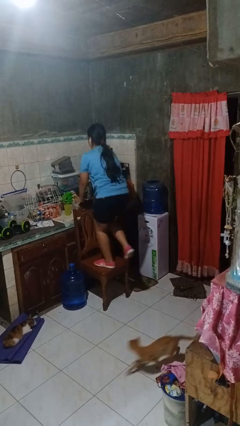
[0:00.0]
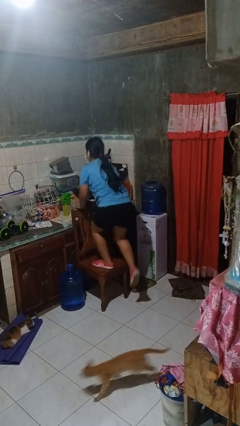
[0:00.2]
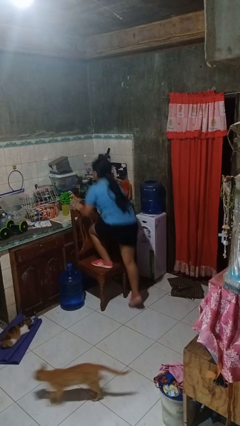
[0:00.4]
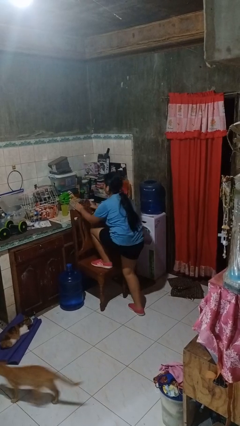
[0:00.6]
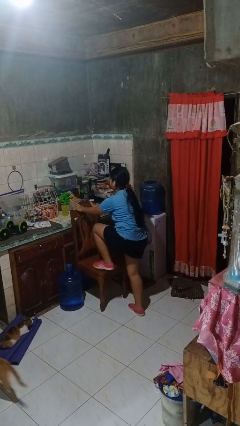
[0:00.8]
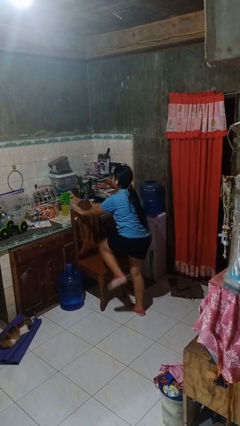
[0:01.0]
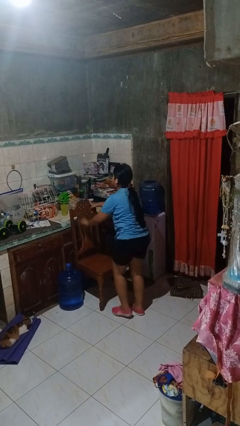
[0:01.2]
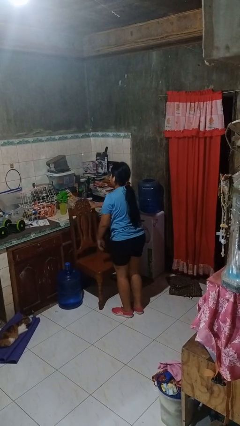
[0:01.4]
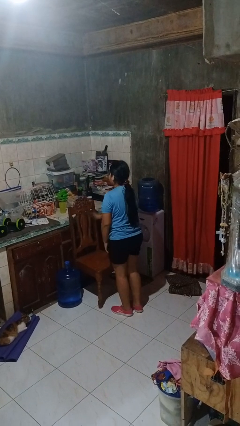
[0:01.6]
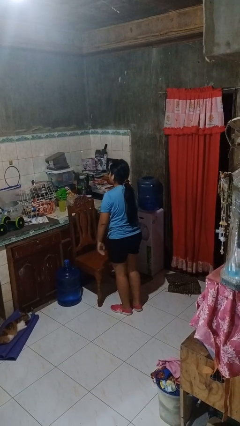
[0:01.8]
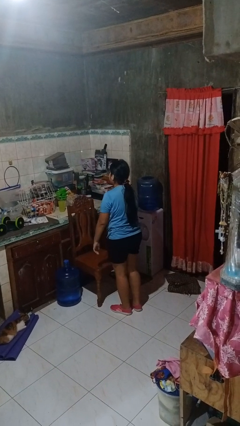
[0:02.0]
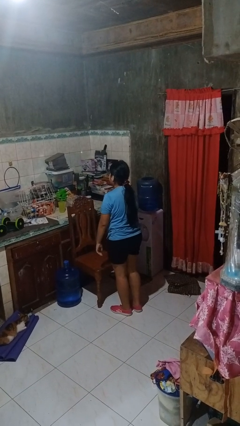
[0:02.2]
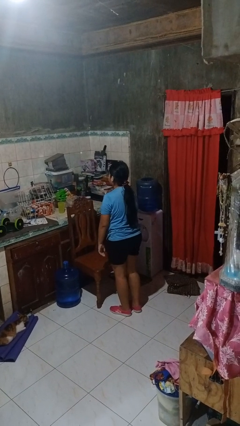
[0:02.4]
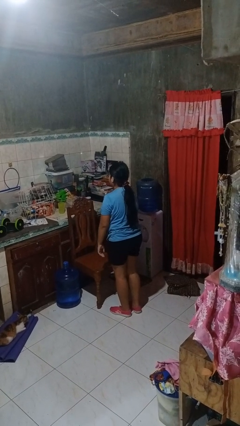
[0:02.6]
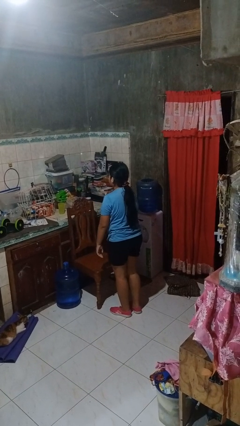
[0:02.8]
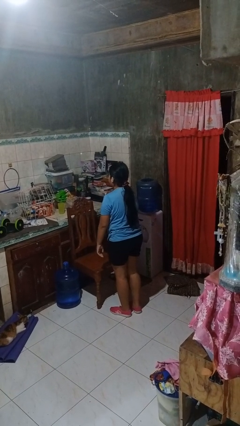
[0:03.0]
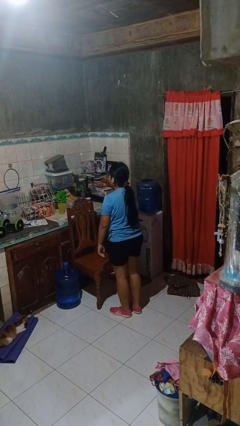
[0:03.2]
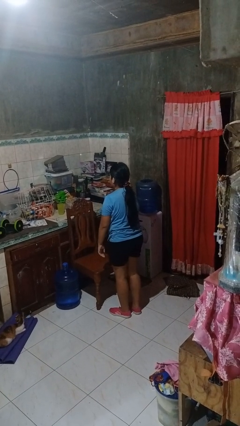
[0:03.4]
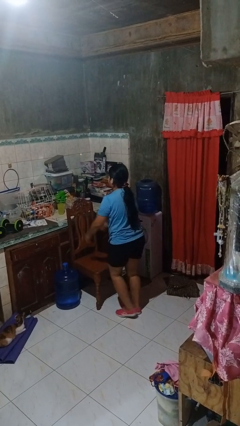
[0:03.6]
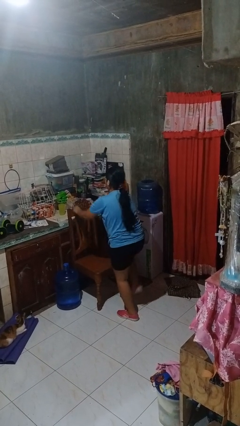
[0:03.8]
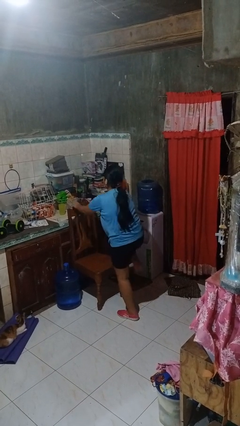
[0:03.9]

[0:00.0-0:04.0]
person climbs off chair

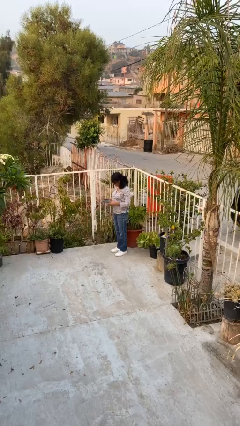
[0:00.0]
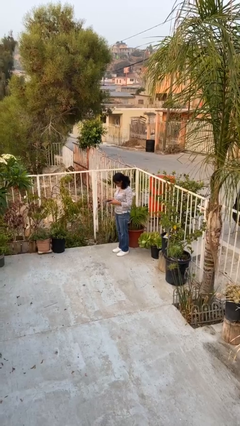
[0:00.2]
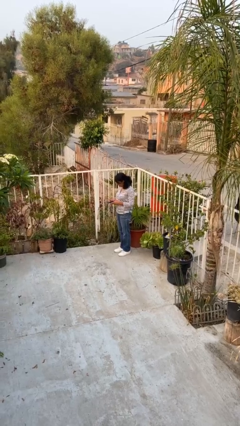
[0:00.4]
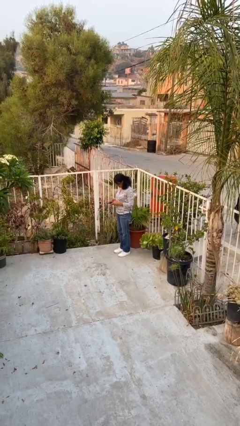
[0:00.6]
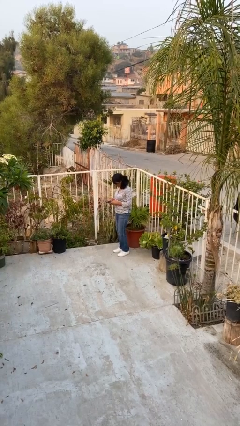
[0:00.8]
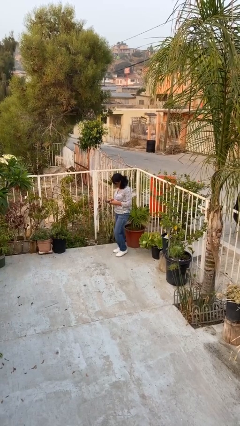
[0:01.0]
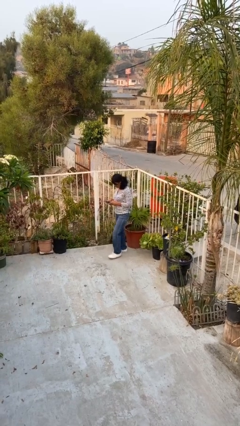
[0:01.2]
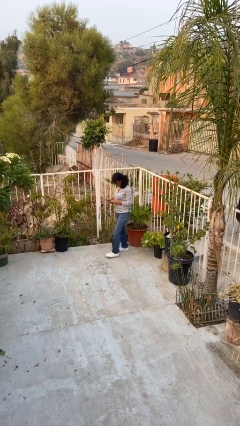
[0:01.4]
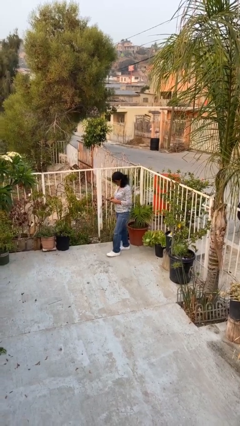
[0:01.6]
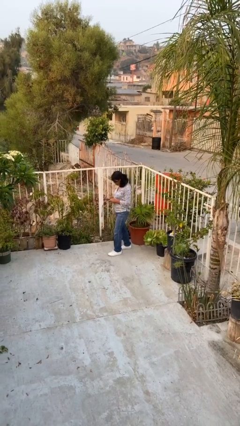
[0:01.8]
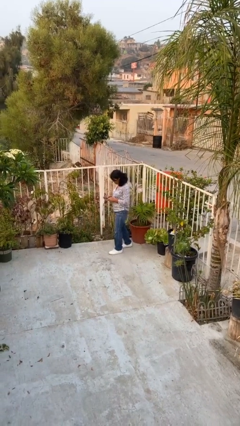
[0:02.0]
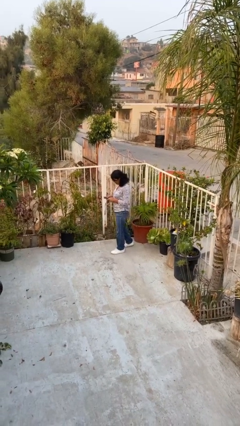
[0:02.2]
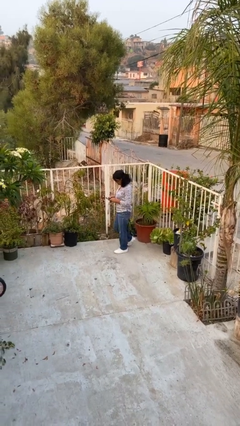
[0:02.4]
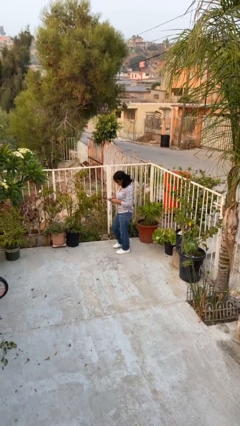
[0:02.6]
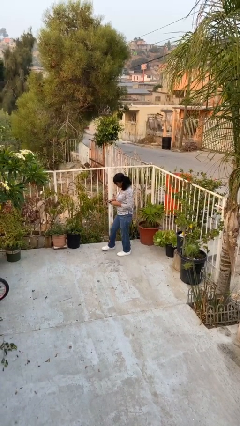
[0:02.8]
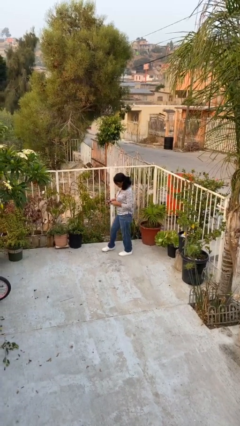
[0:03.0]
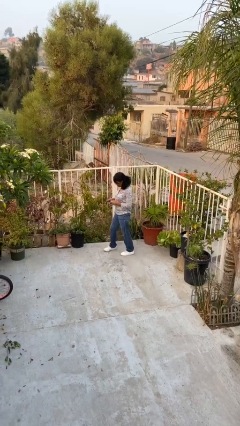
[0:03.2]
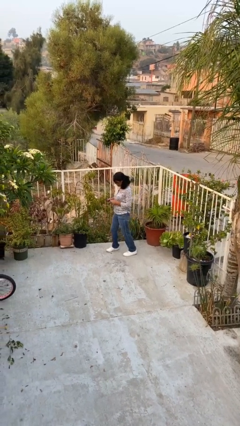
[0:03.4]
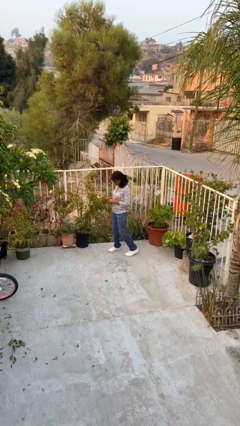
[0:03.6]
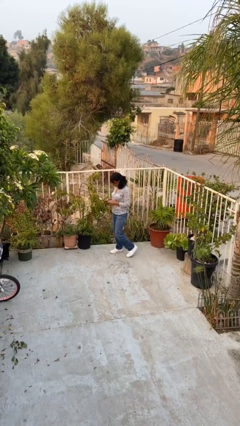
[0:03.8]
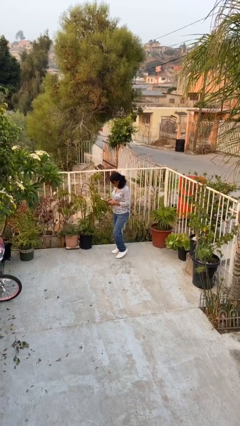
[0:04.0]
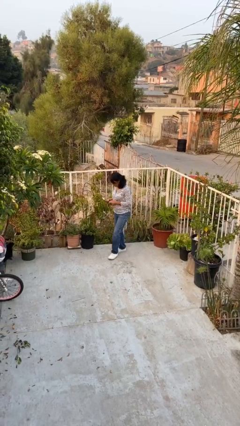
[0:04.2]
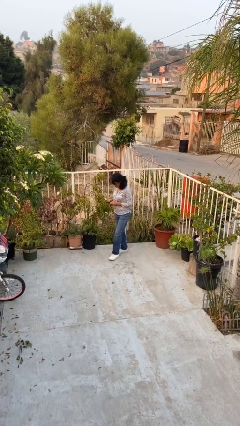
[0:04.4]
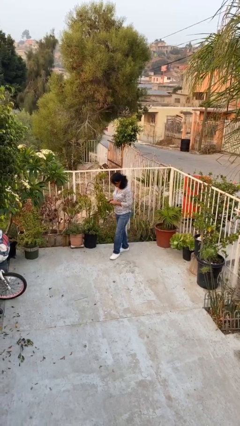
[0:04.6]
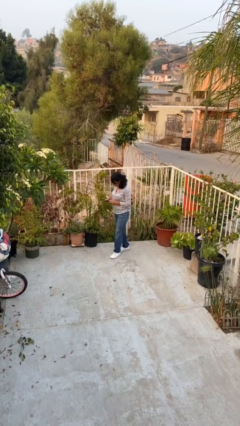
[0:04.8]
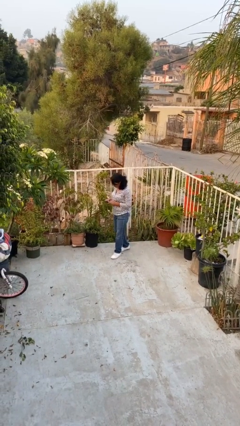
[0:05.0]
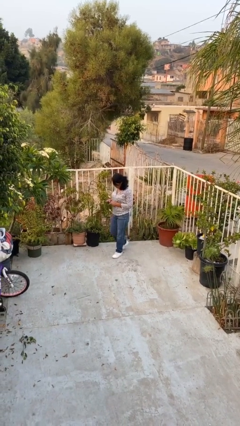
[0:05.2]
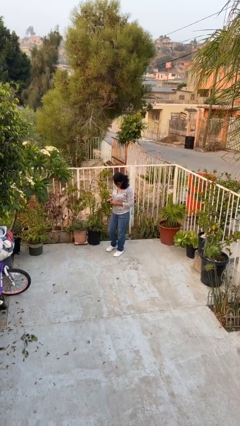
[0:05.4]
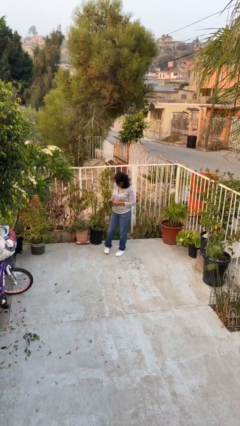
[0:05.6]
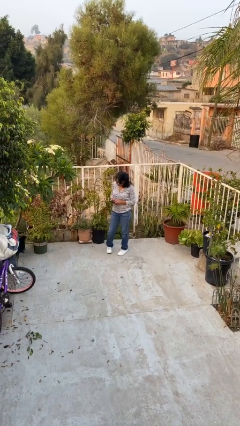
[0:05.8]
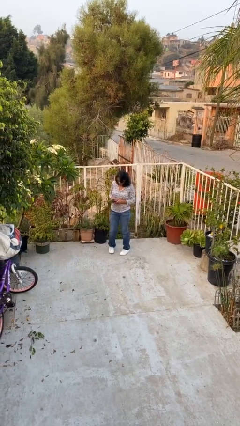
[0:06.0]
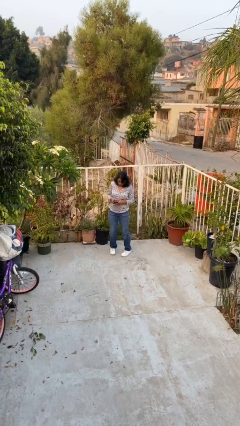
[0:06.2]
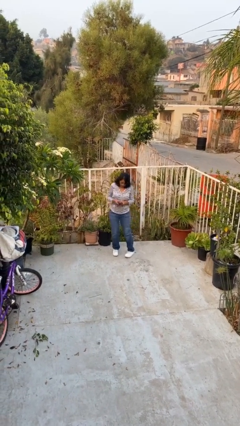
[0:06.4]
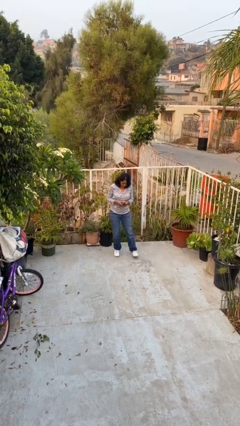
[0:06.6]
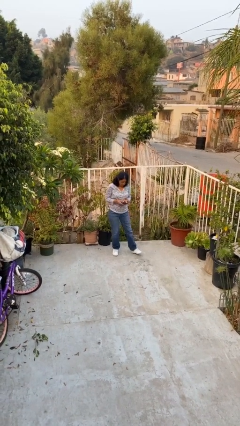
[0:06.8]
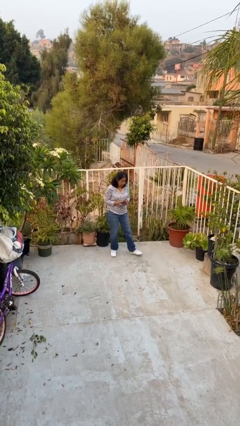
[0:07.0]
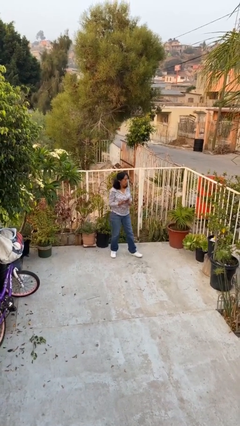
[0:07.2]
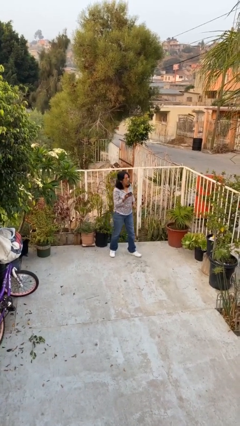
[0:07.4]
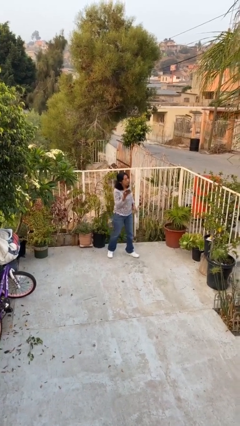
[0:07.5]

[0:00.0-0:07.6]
person texts on phone

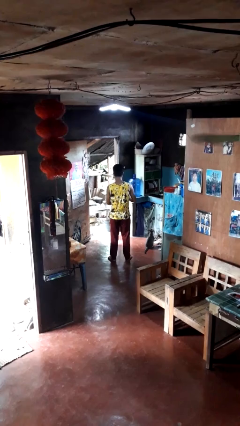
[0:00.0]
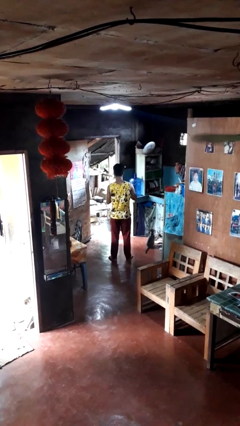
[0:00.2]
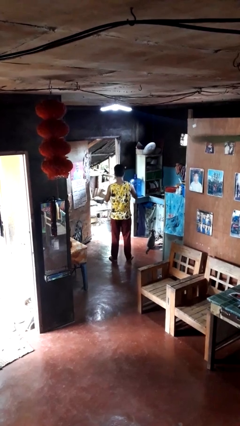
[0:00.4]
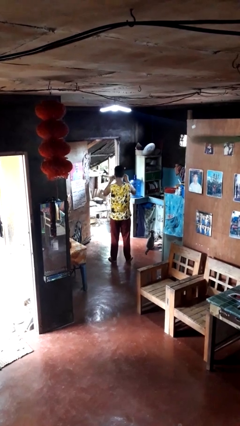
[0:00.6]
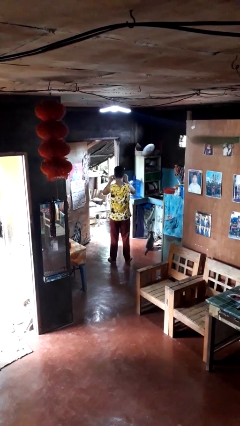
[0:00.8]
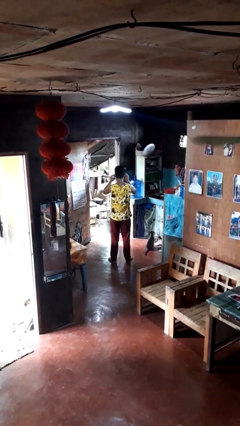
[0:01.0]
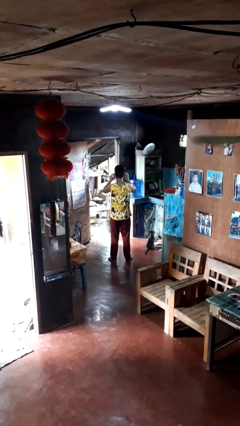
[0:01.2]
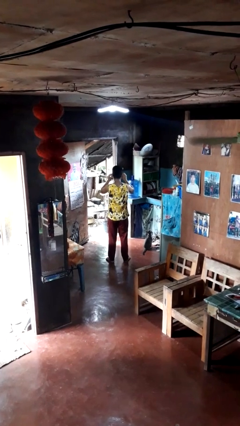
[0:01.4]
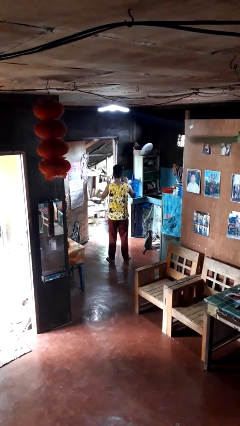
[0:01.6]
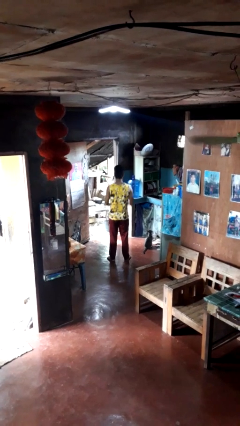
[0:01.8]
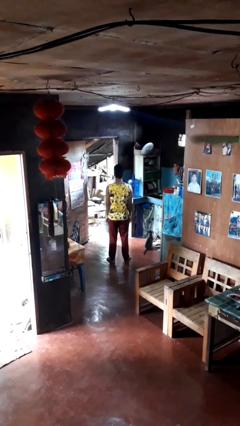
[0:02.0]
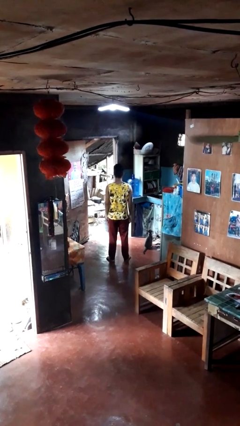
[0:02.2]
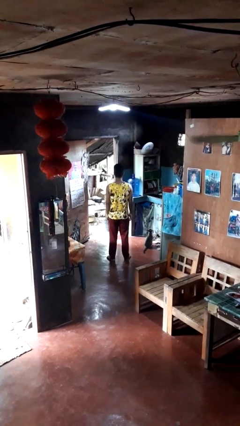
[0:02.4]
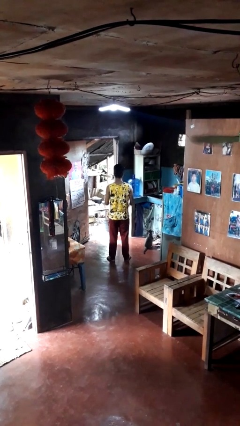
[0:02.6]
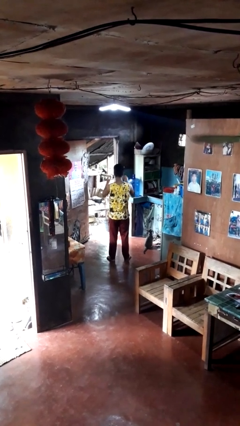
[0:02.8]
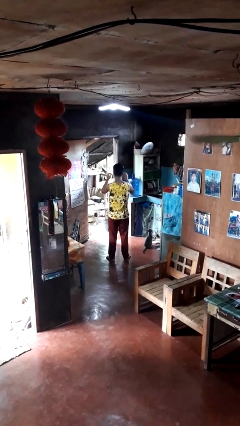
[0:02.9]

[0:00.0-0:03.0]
person puts on glasses

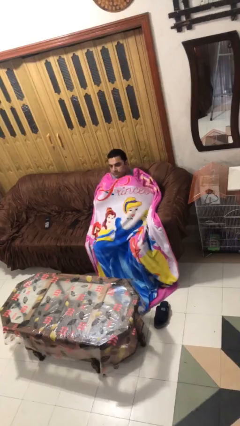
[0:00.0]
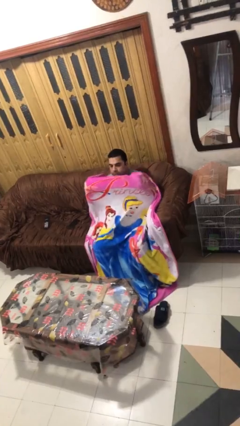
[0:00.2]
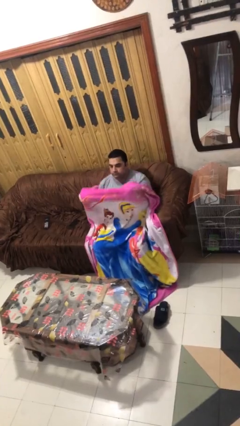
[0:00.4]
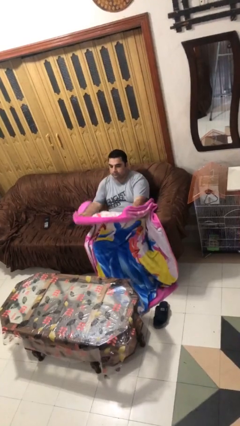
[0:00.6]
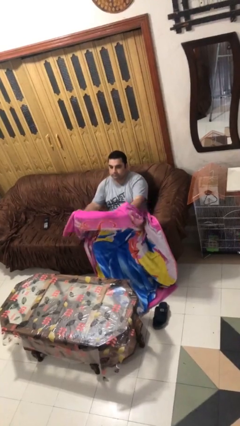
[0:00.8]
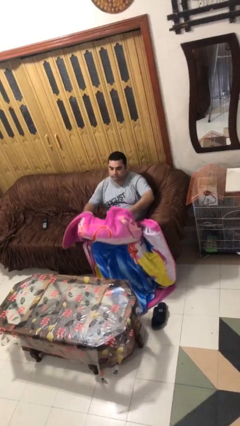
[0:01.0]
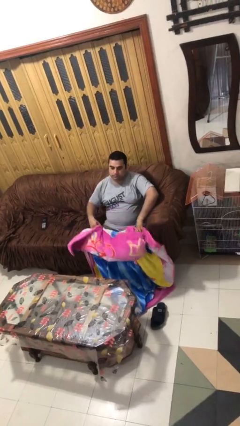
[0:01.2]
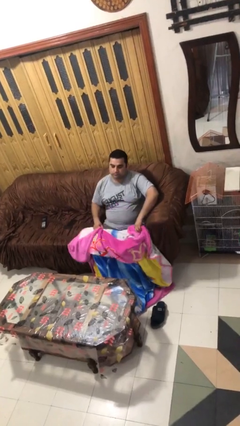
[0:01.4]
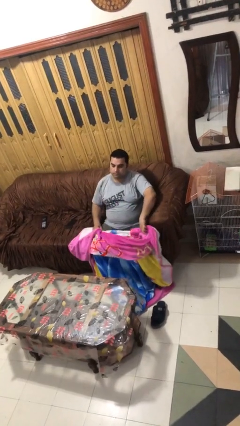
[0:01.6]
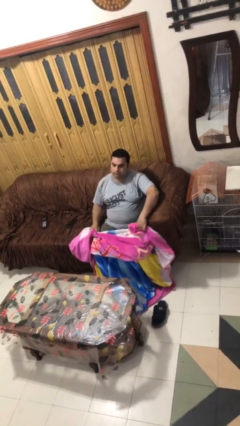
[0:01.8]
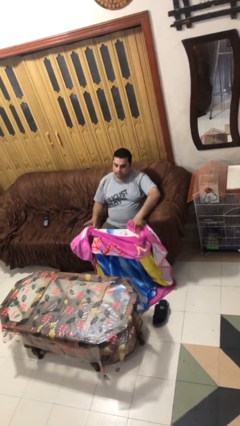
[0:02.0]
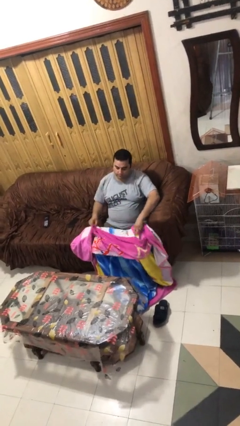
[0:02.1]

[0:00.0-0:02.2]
person uncovers with blanket

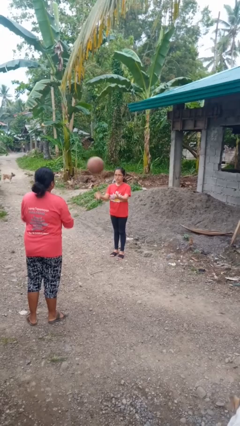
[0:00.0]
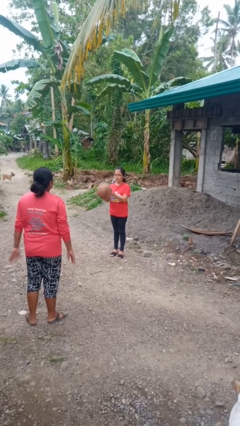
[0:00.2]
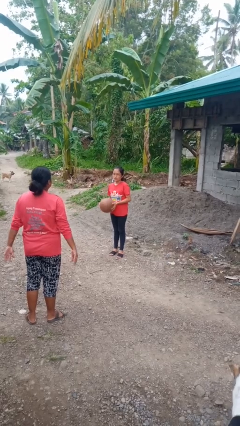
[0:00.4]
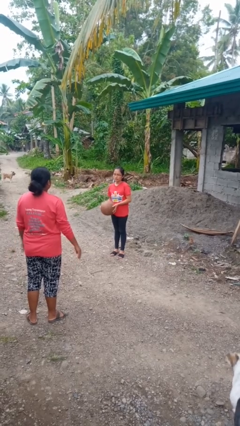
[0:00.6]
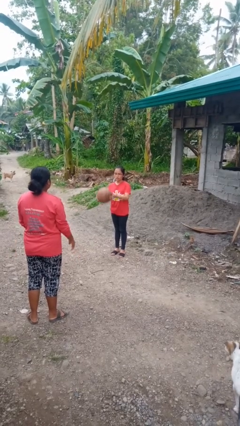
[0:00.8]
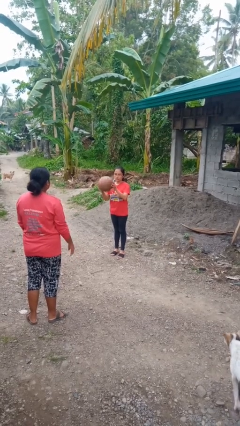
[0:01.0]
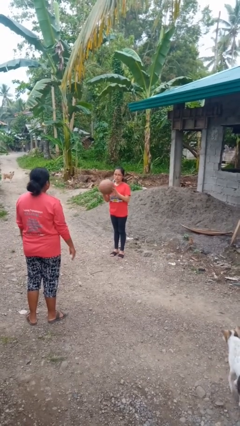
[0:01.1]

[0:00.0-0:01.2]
person catches object from person
